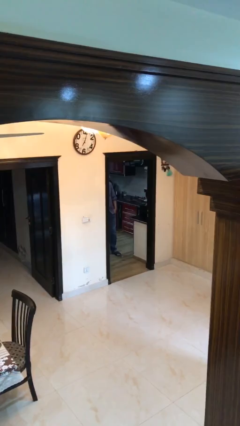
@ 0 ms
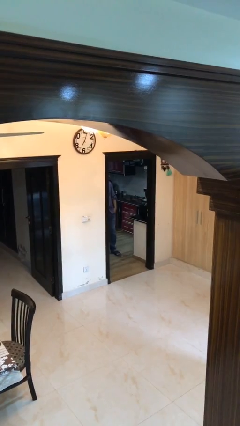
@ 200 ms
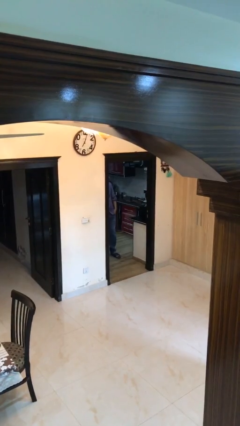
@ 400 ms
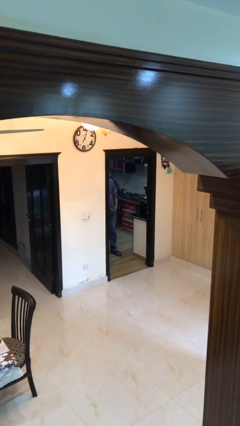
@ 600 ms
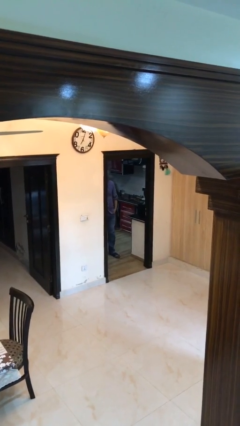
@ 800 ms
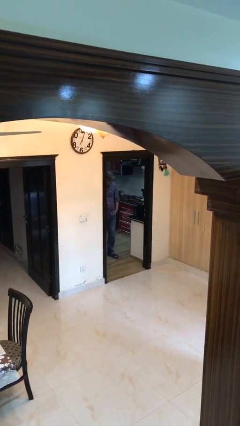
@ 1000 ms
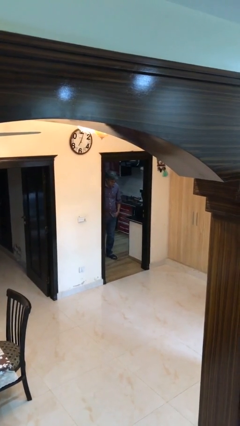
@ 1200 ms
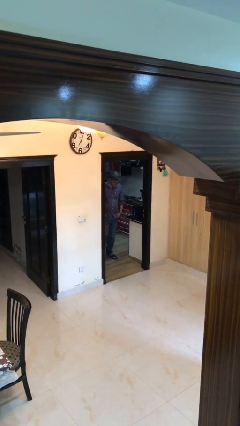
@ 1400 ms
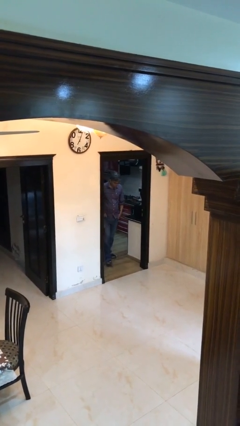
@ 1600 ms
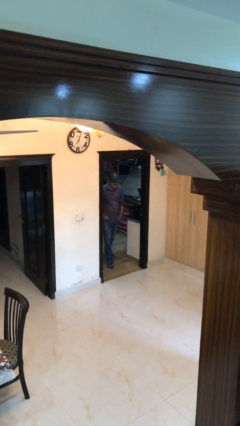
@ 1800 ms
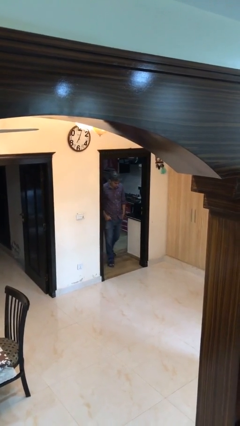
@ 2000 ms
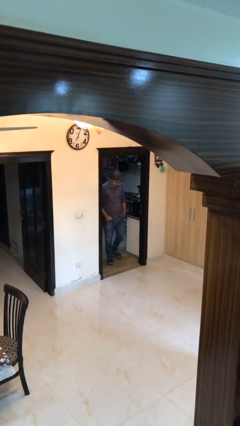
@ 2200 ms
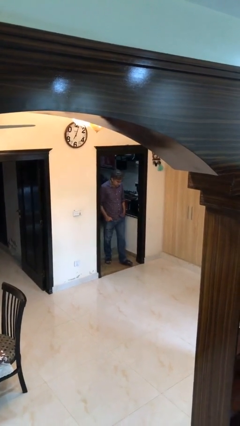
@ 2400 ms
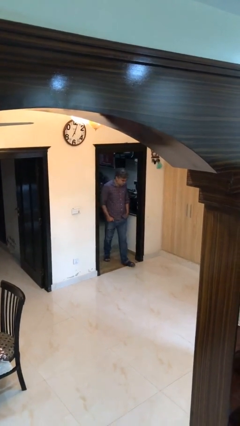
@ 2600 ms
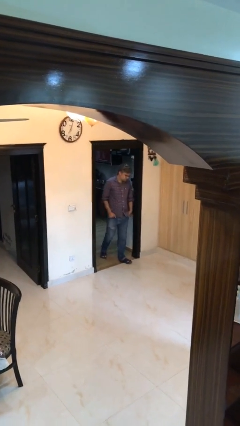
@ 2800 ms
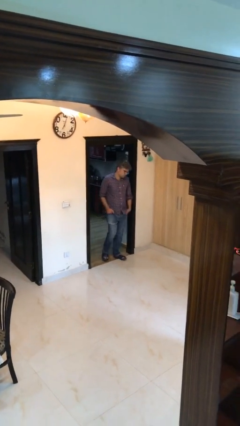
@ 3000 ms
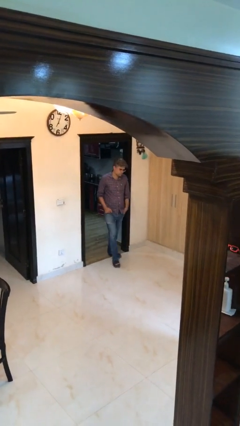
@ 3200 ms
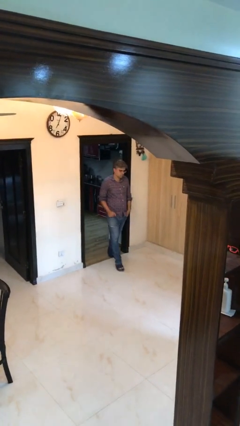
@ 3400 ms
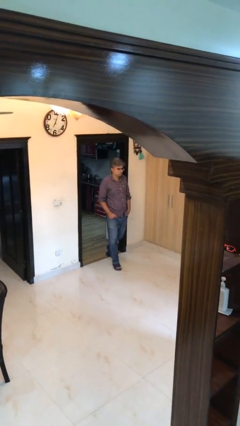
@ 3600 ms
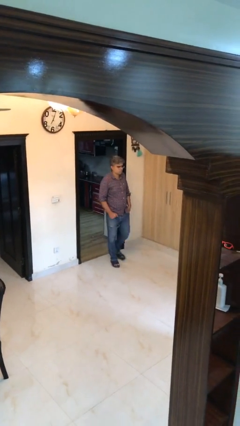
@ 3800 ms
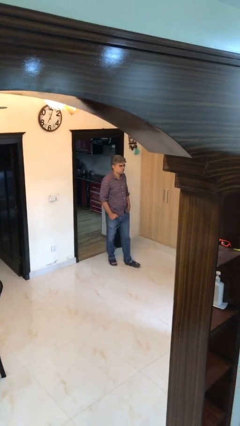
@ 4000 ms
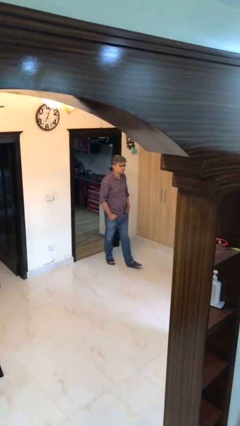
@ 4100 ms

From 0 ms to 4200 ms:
person enters scene through structure

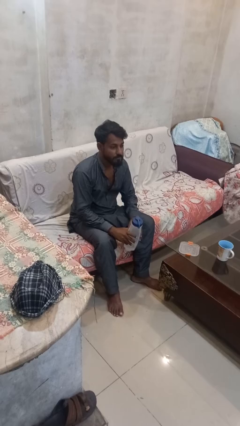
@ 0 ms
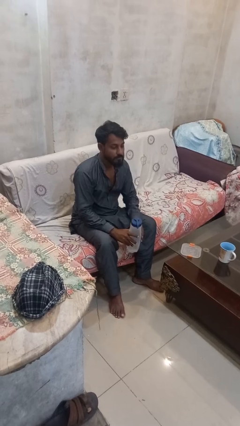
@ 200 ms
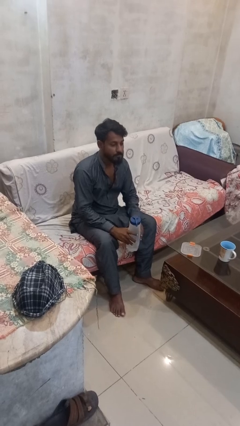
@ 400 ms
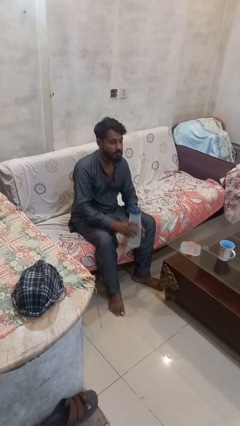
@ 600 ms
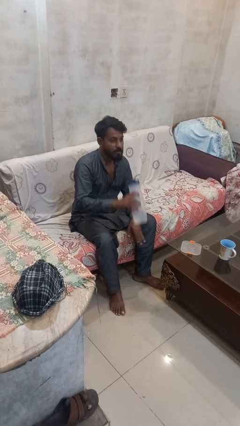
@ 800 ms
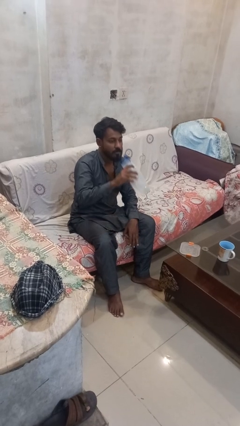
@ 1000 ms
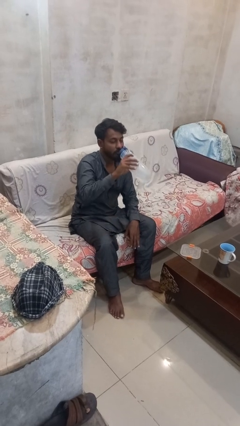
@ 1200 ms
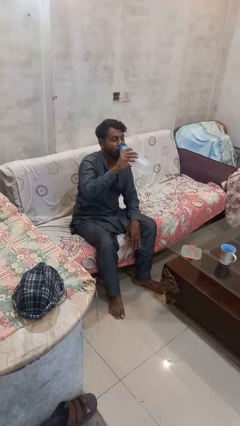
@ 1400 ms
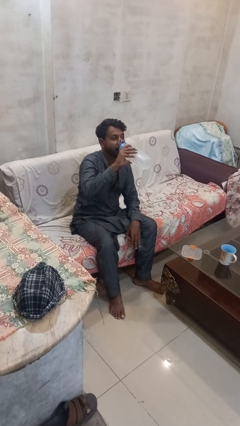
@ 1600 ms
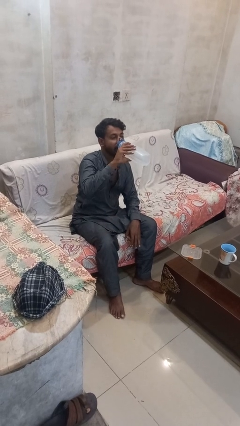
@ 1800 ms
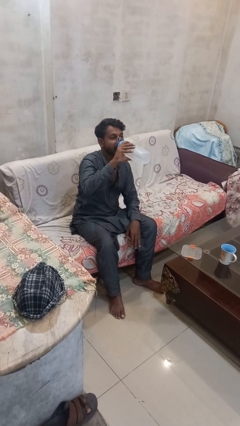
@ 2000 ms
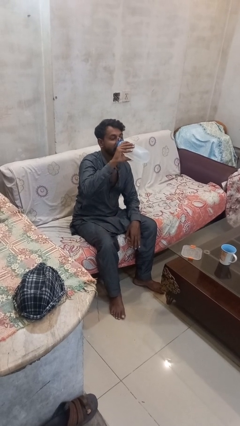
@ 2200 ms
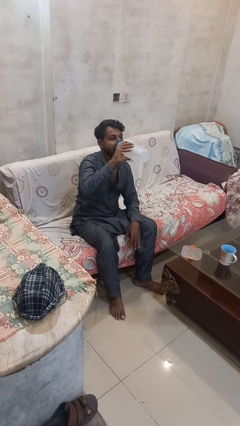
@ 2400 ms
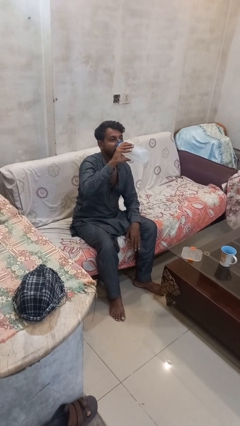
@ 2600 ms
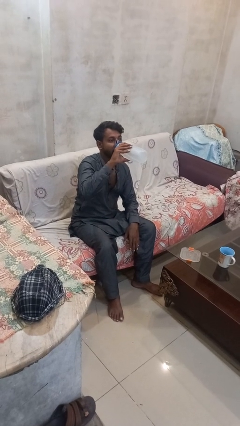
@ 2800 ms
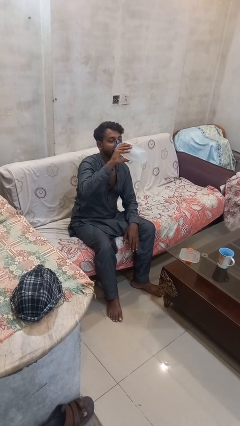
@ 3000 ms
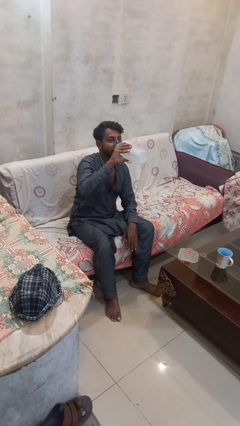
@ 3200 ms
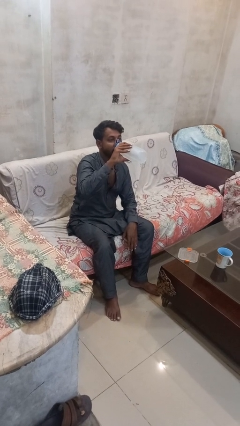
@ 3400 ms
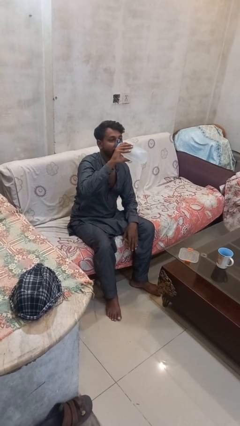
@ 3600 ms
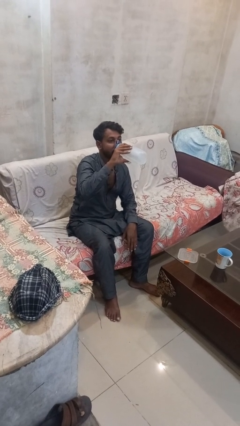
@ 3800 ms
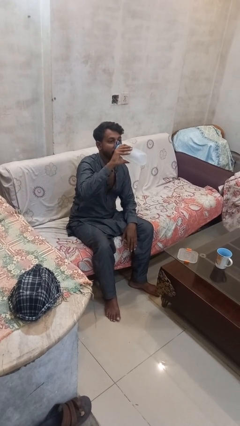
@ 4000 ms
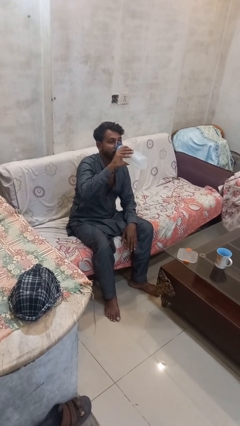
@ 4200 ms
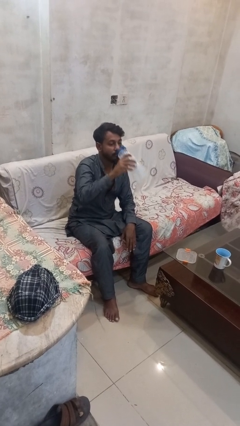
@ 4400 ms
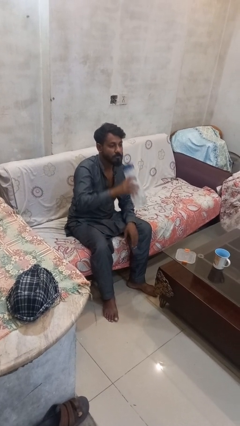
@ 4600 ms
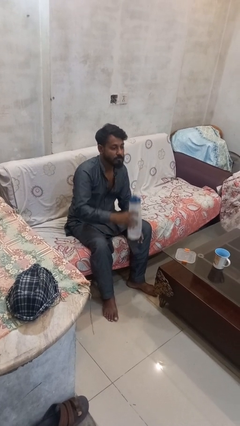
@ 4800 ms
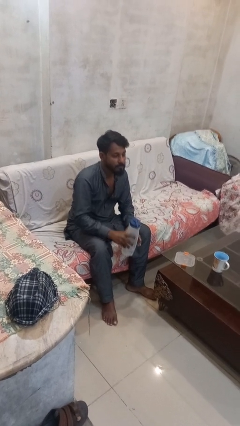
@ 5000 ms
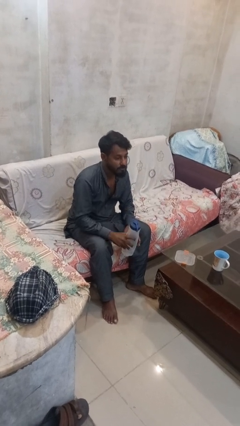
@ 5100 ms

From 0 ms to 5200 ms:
person drinks from bottle

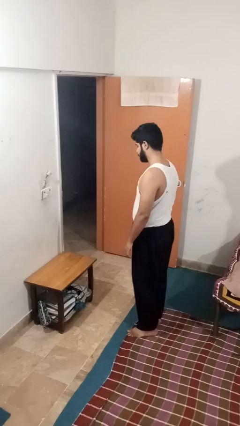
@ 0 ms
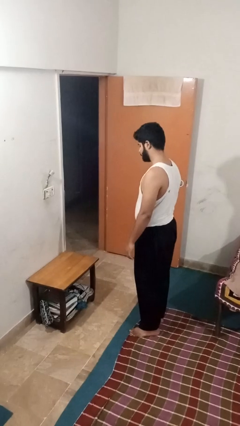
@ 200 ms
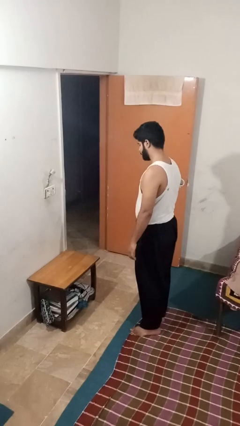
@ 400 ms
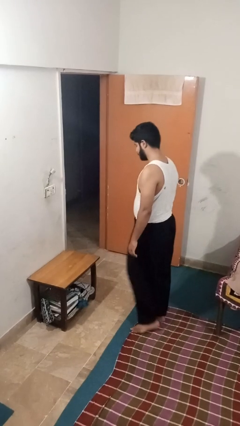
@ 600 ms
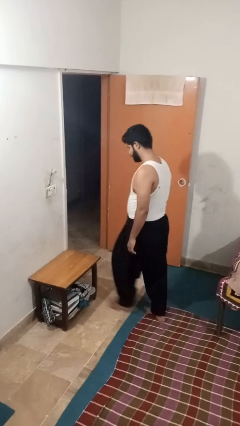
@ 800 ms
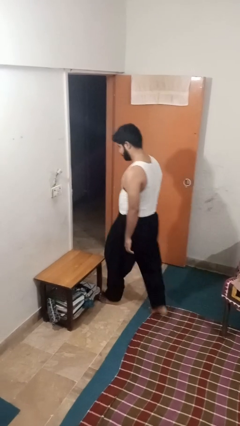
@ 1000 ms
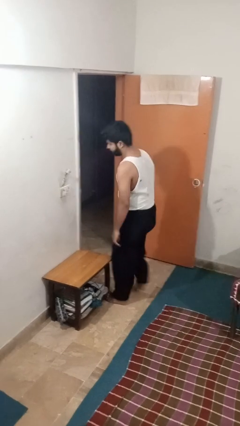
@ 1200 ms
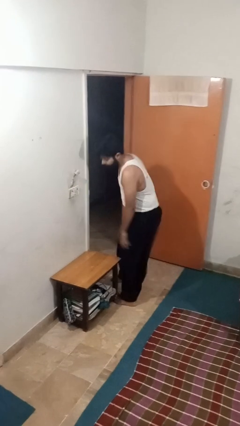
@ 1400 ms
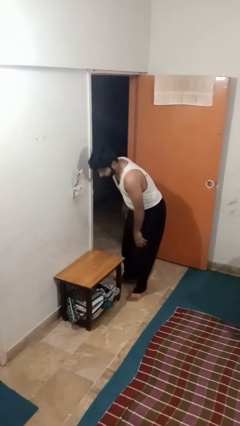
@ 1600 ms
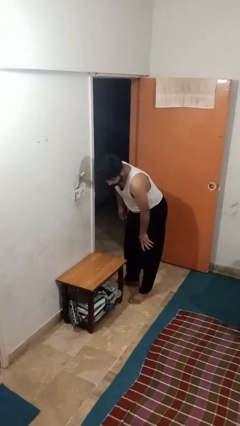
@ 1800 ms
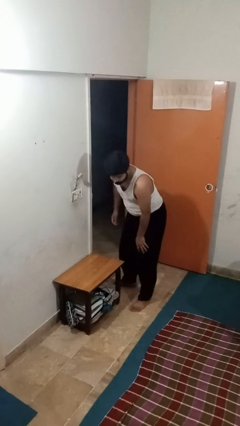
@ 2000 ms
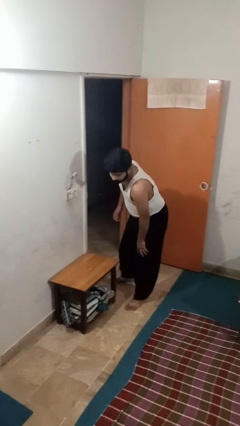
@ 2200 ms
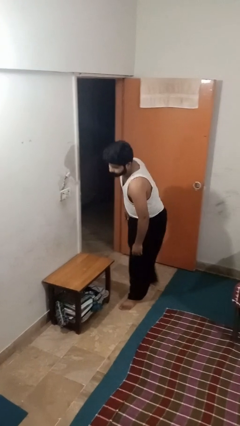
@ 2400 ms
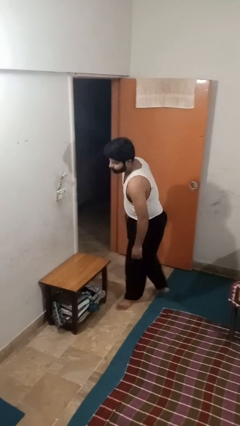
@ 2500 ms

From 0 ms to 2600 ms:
person bumps into table

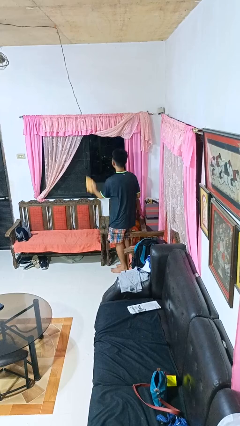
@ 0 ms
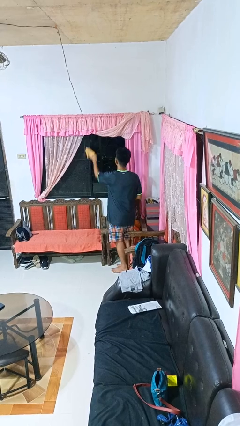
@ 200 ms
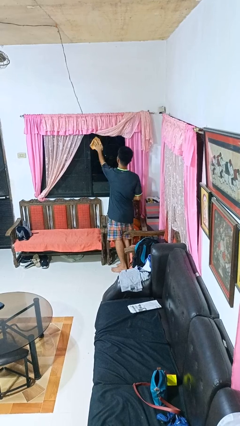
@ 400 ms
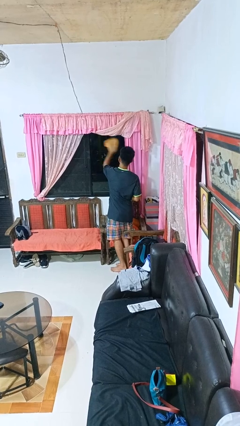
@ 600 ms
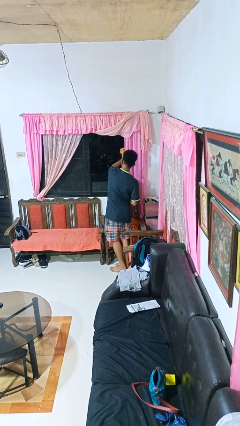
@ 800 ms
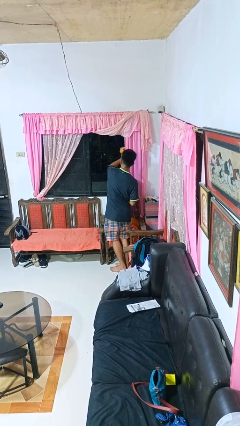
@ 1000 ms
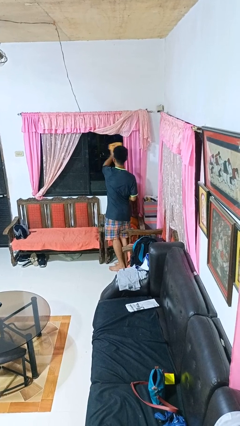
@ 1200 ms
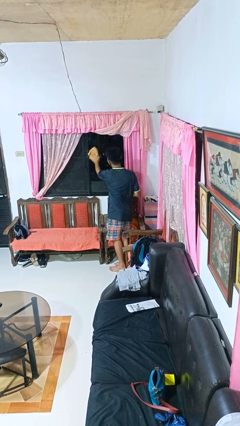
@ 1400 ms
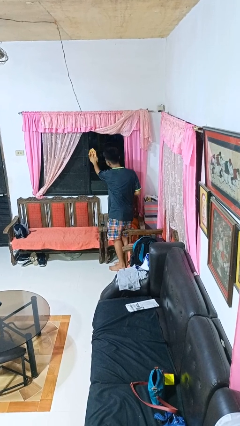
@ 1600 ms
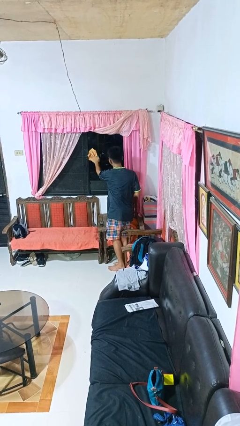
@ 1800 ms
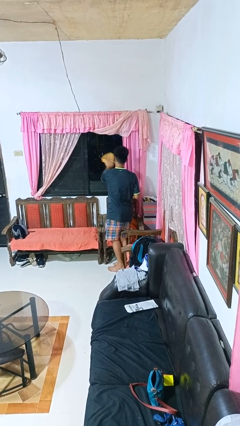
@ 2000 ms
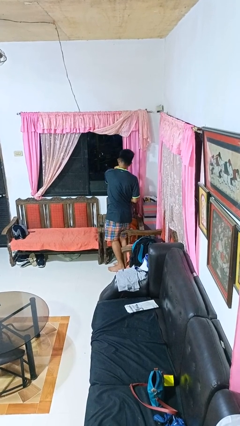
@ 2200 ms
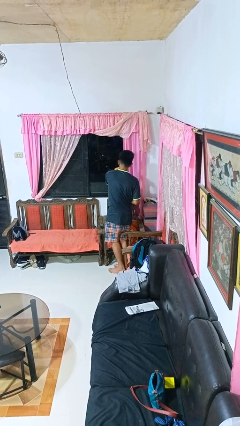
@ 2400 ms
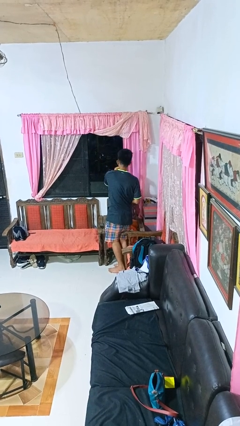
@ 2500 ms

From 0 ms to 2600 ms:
person washes window

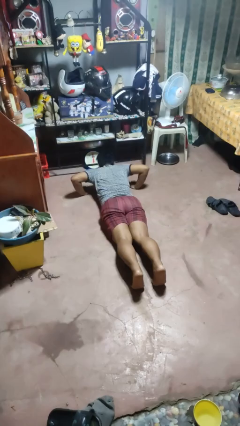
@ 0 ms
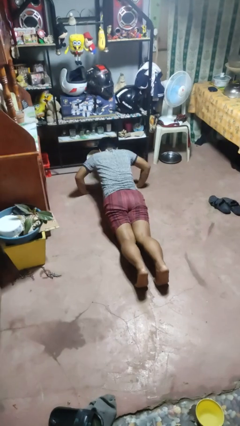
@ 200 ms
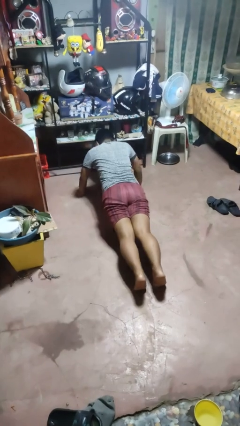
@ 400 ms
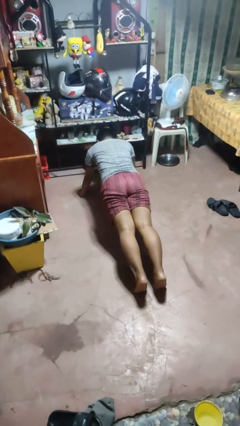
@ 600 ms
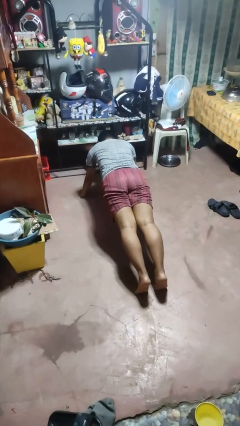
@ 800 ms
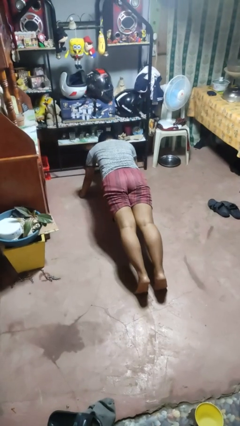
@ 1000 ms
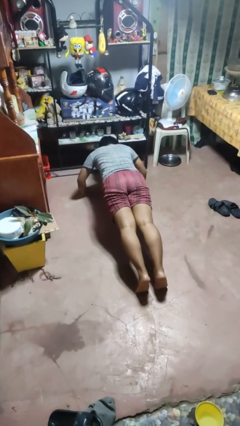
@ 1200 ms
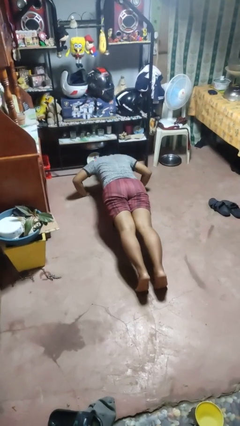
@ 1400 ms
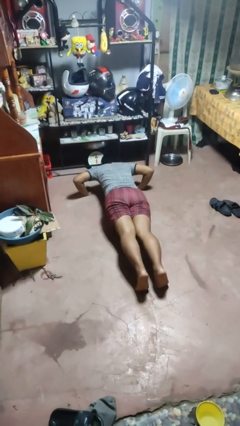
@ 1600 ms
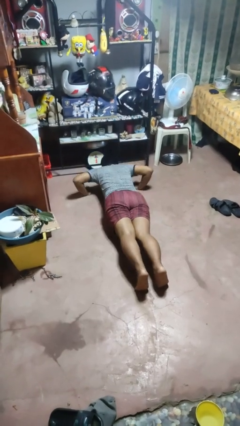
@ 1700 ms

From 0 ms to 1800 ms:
person exercises with pushup

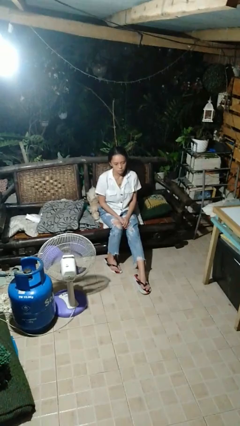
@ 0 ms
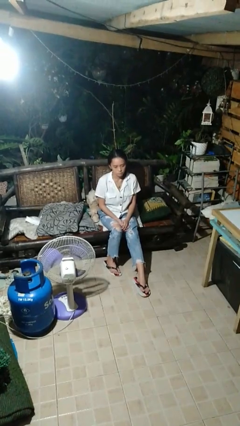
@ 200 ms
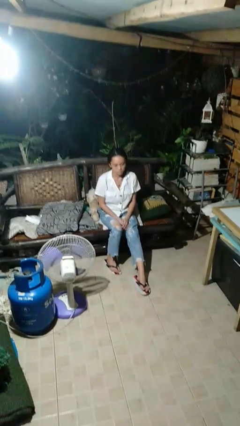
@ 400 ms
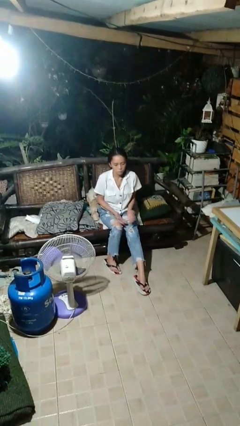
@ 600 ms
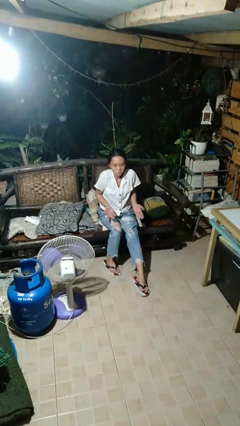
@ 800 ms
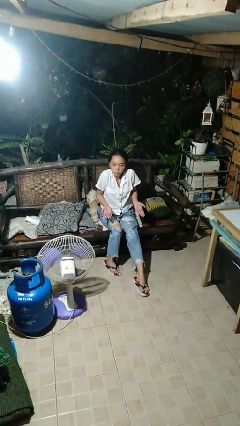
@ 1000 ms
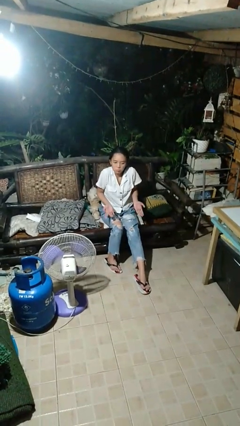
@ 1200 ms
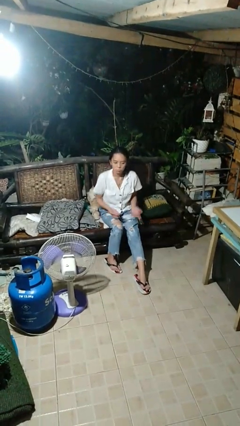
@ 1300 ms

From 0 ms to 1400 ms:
person shrugs
